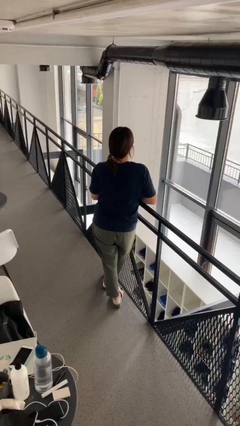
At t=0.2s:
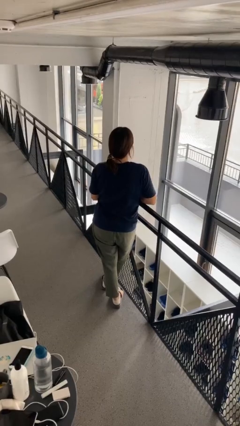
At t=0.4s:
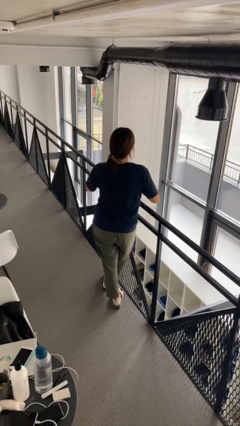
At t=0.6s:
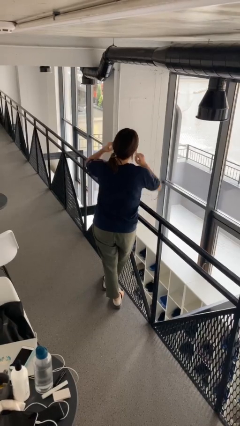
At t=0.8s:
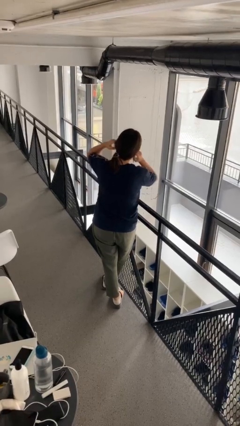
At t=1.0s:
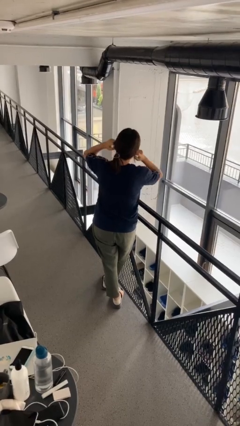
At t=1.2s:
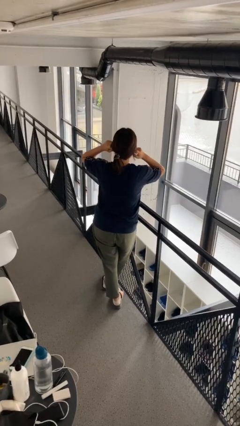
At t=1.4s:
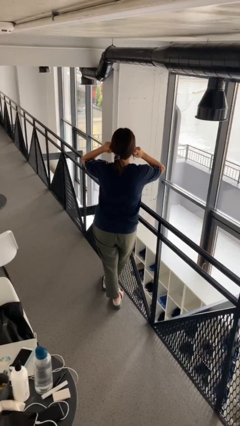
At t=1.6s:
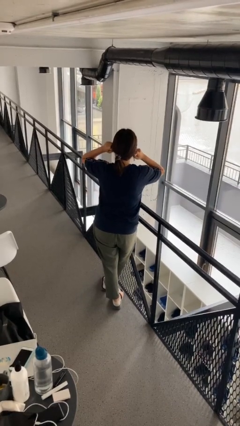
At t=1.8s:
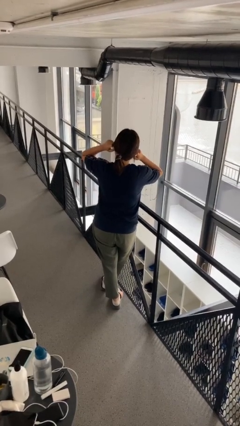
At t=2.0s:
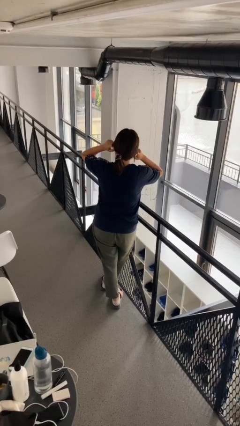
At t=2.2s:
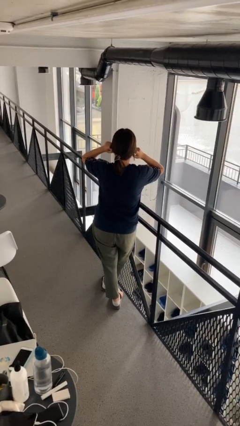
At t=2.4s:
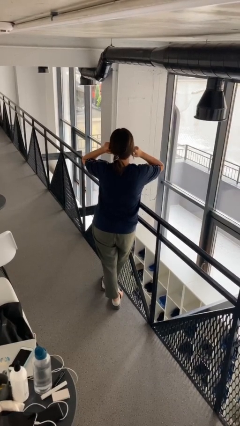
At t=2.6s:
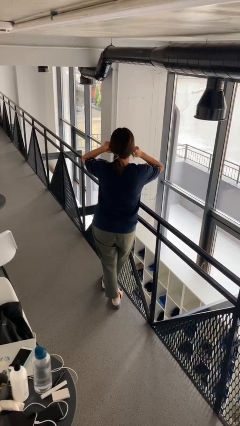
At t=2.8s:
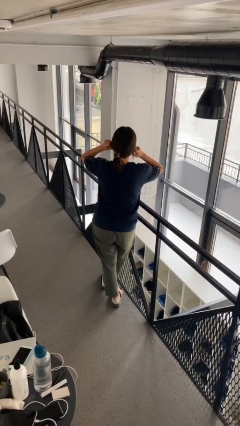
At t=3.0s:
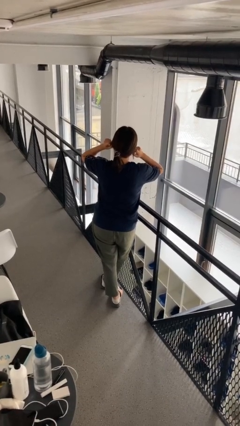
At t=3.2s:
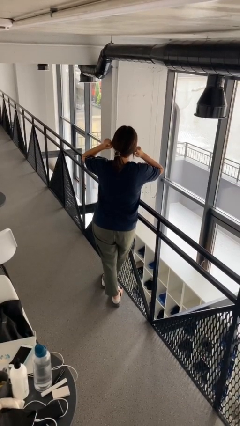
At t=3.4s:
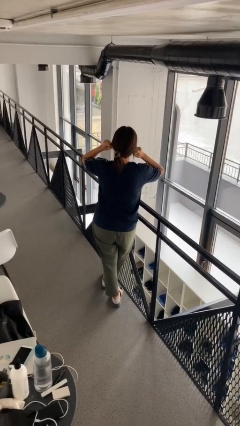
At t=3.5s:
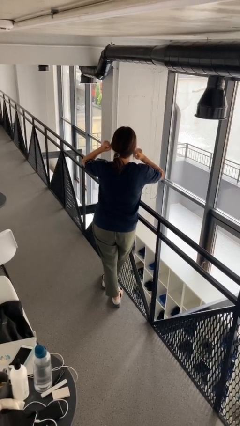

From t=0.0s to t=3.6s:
person puts fingers in ear

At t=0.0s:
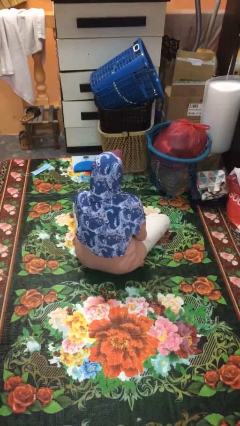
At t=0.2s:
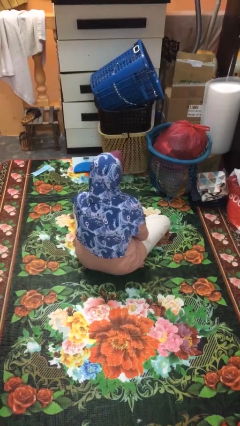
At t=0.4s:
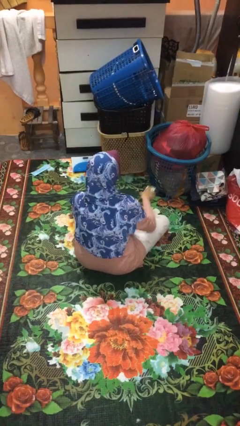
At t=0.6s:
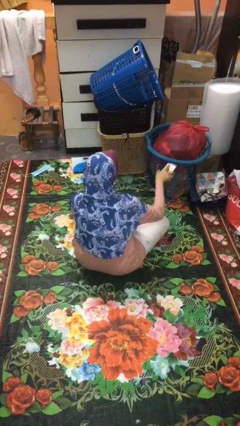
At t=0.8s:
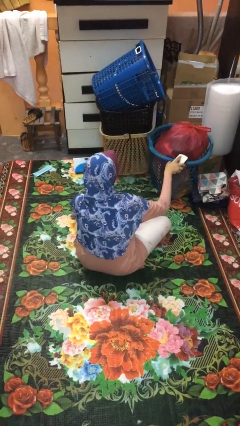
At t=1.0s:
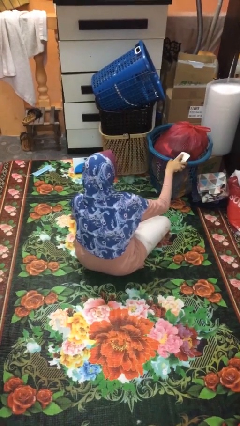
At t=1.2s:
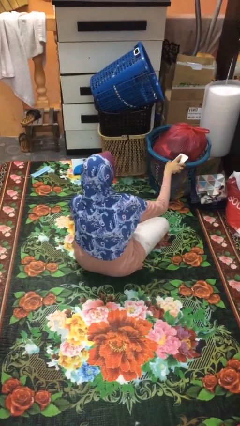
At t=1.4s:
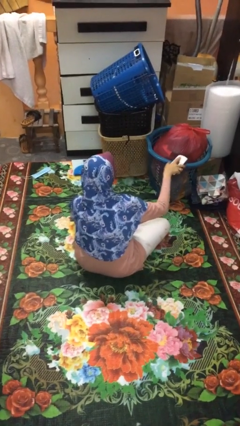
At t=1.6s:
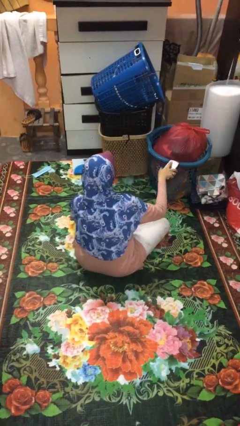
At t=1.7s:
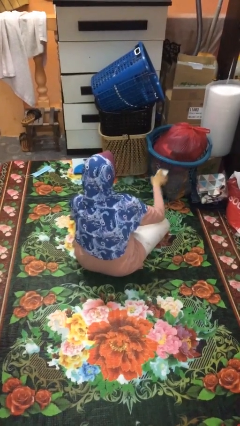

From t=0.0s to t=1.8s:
person uses television remote

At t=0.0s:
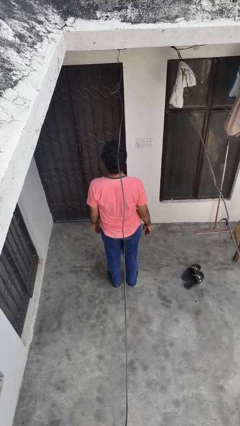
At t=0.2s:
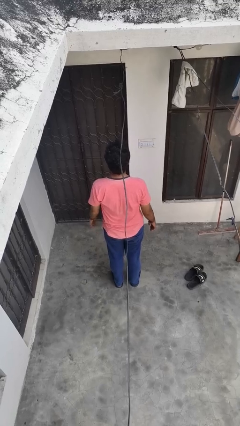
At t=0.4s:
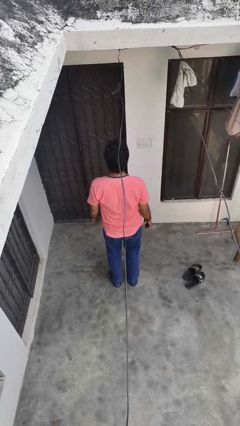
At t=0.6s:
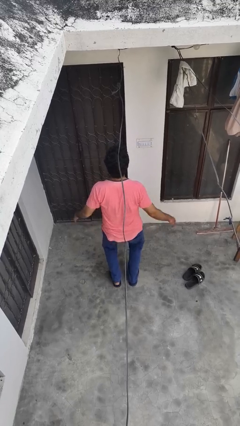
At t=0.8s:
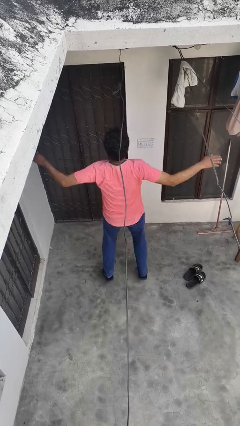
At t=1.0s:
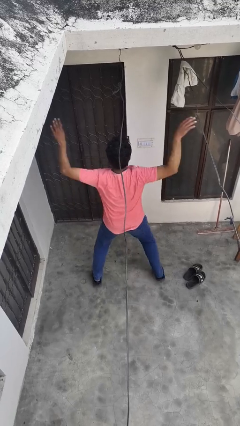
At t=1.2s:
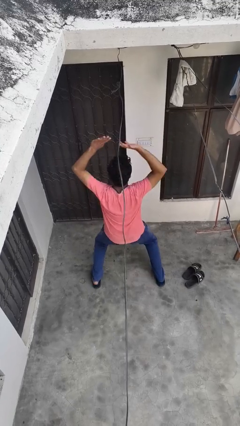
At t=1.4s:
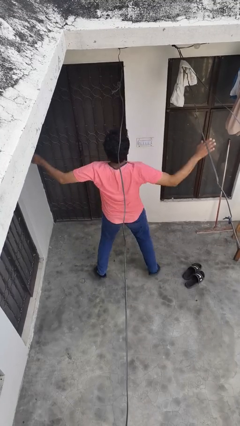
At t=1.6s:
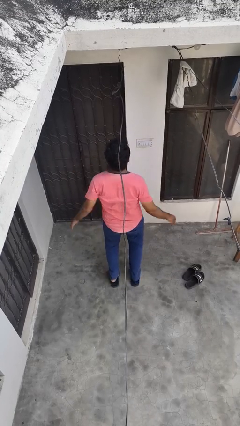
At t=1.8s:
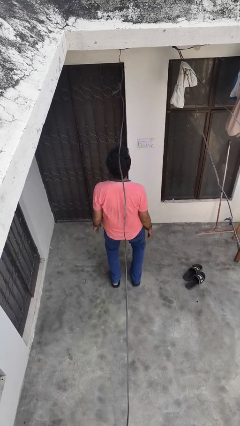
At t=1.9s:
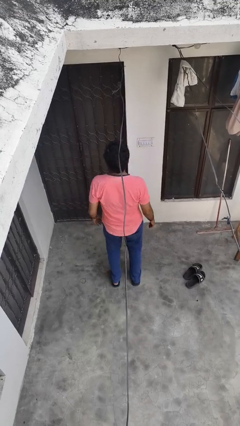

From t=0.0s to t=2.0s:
person exercises with jumping jacks

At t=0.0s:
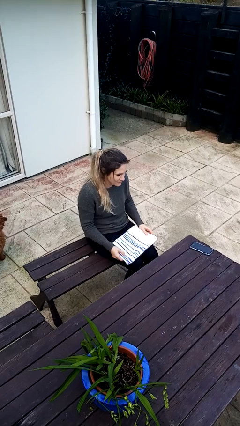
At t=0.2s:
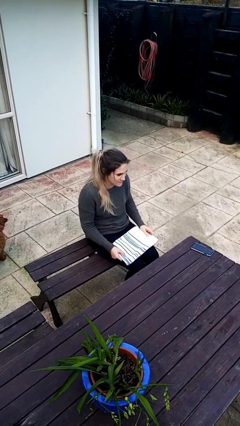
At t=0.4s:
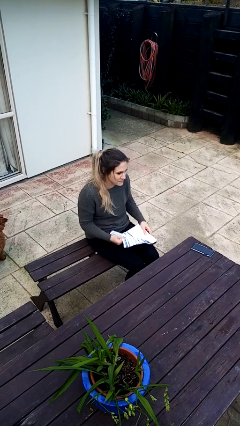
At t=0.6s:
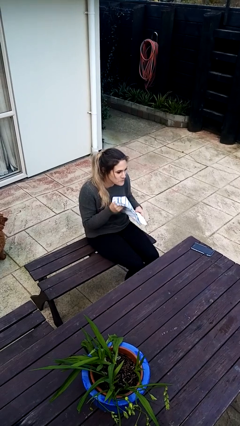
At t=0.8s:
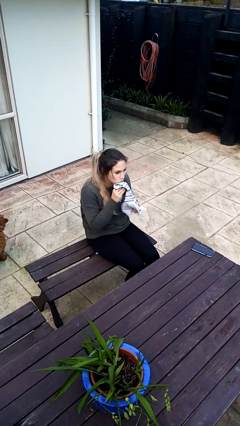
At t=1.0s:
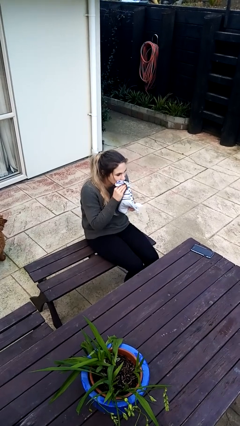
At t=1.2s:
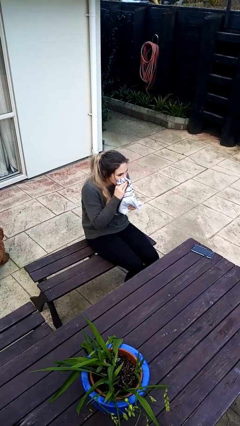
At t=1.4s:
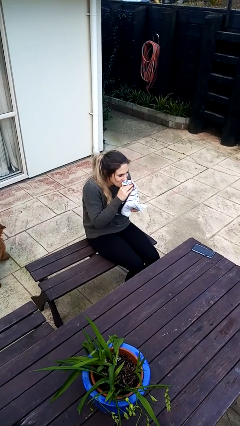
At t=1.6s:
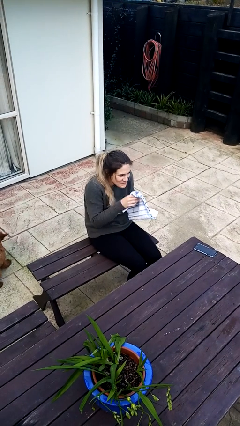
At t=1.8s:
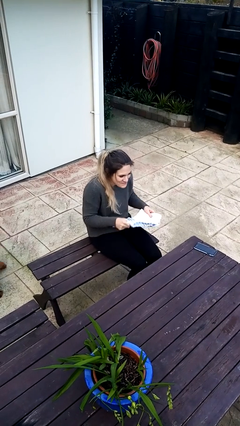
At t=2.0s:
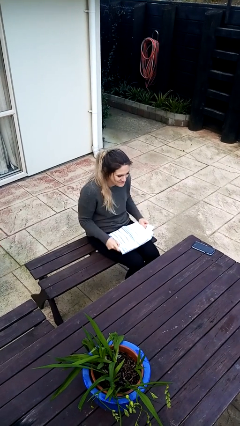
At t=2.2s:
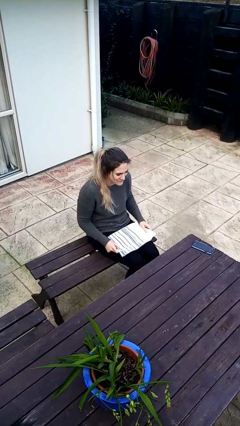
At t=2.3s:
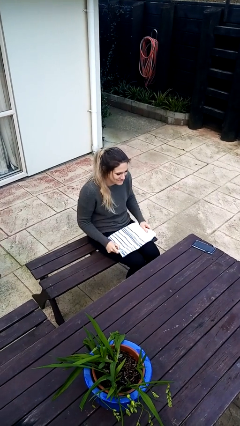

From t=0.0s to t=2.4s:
person wipes mouth with napkin

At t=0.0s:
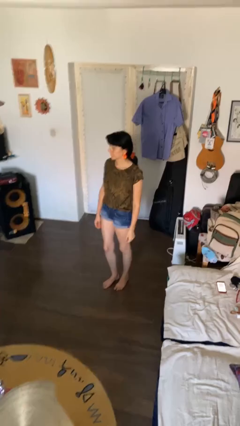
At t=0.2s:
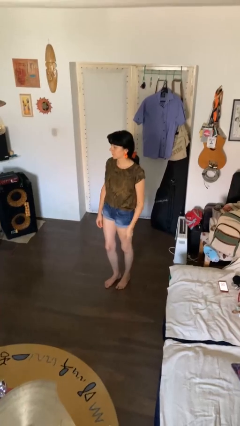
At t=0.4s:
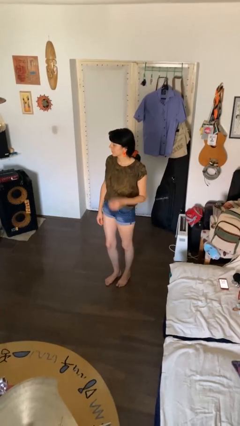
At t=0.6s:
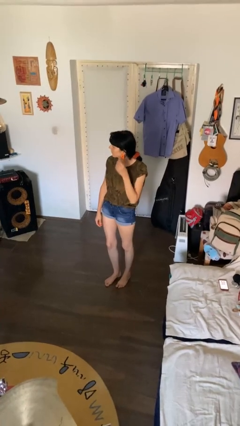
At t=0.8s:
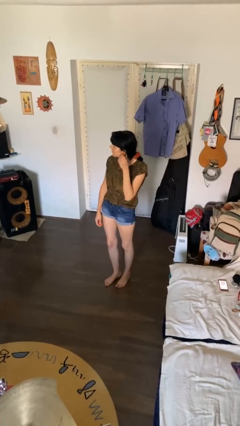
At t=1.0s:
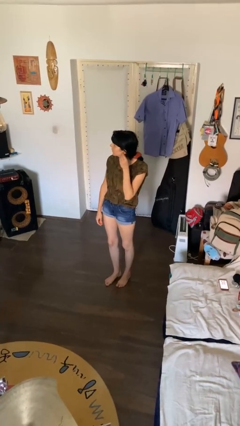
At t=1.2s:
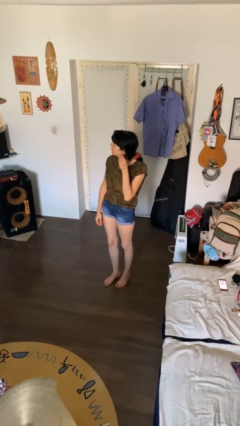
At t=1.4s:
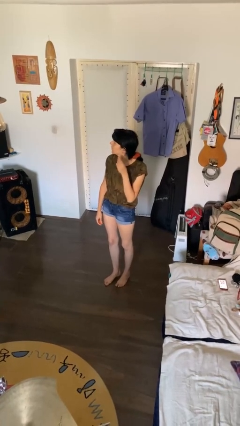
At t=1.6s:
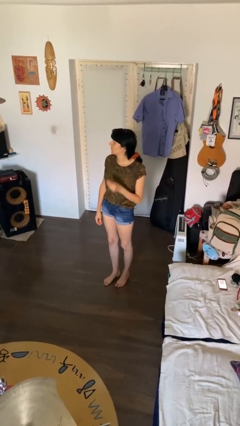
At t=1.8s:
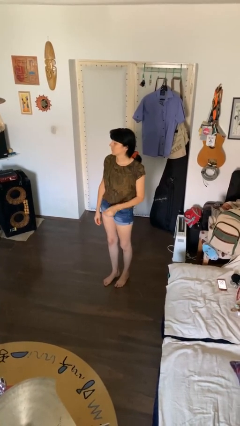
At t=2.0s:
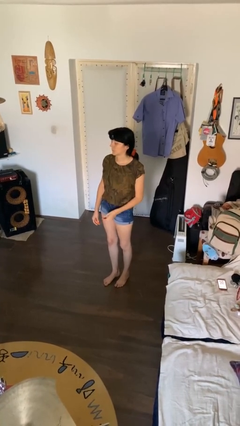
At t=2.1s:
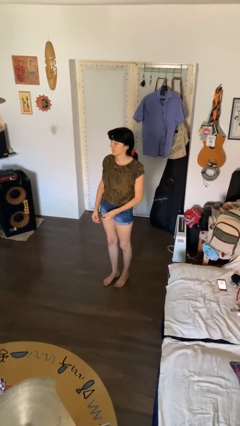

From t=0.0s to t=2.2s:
person takes off earrings

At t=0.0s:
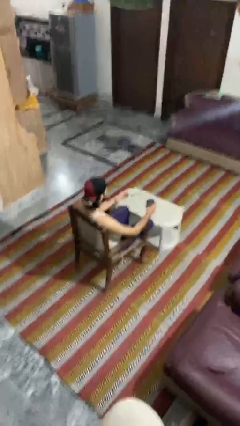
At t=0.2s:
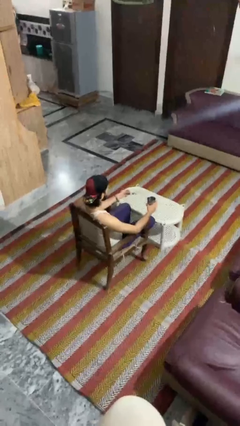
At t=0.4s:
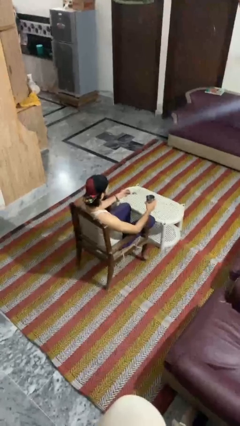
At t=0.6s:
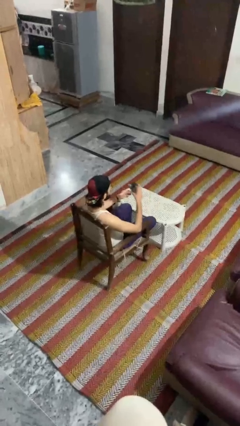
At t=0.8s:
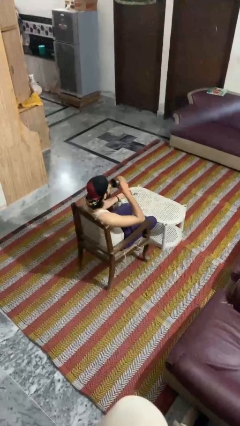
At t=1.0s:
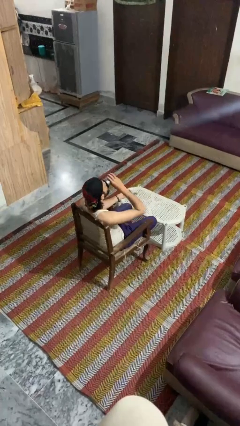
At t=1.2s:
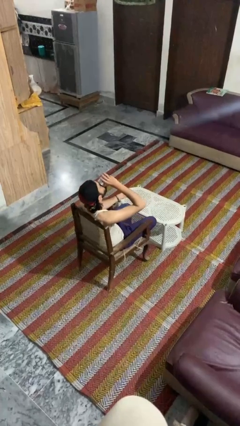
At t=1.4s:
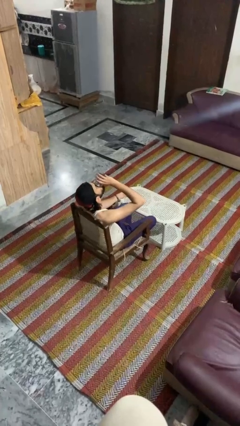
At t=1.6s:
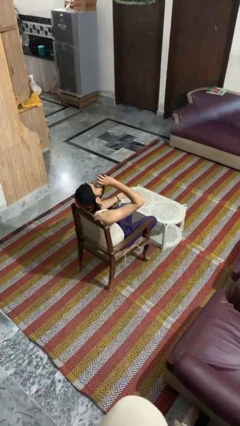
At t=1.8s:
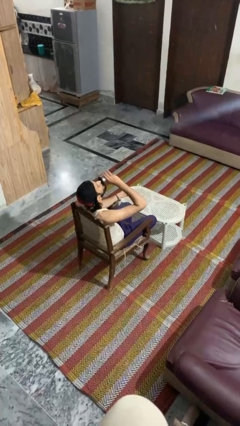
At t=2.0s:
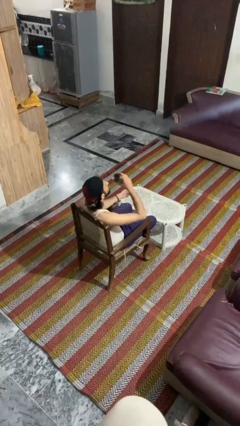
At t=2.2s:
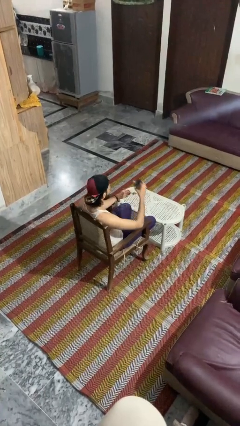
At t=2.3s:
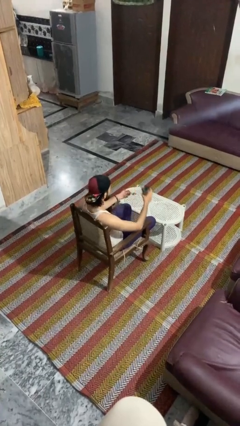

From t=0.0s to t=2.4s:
person drinks from mug

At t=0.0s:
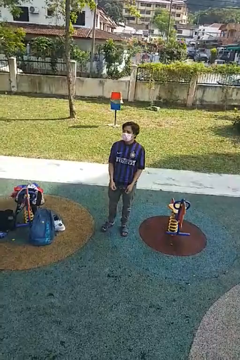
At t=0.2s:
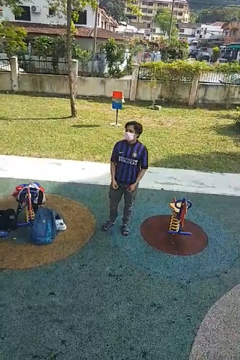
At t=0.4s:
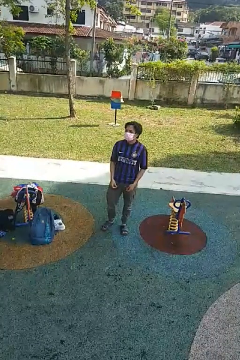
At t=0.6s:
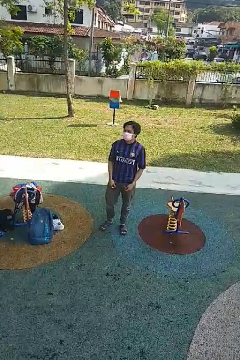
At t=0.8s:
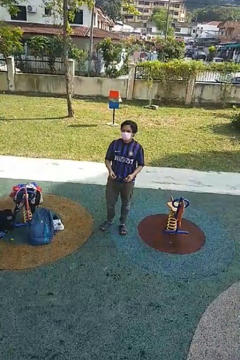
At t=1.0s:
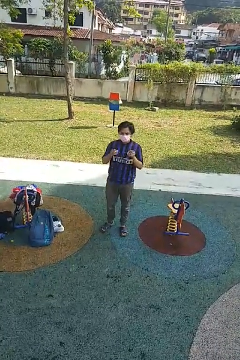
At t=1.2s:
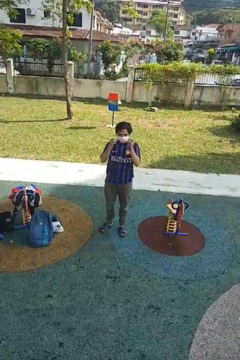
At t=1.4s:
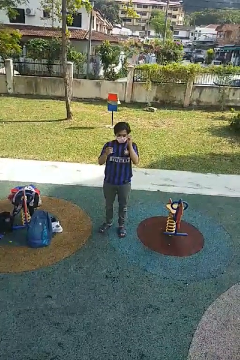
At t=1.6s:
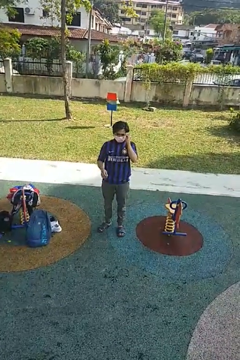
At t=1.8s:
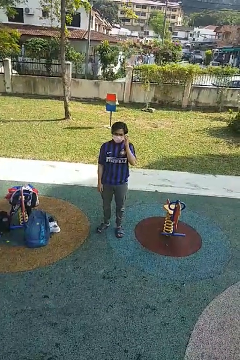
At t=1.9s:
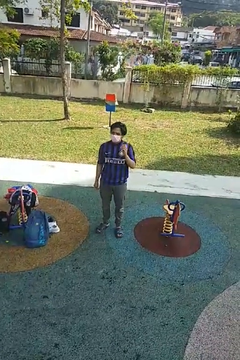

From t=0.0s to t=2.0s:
person puts on glasses

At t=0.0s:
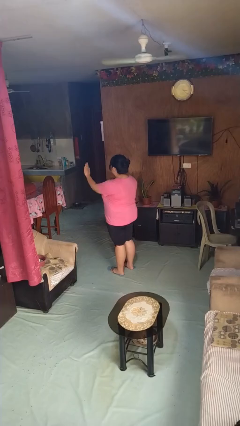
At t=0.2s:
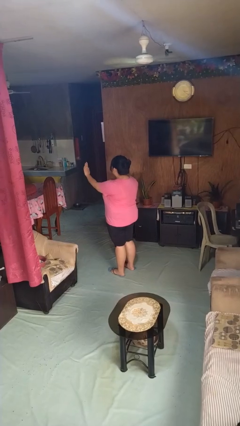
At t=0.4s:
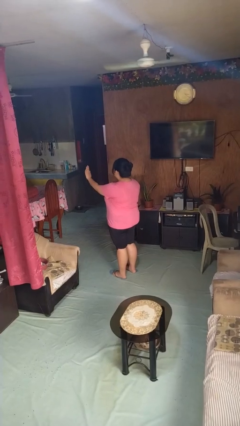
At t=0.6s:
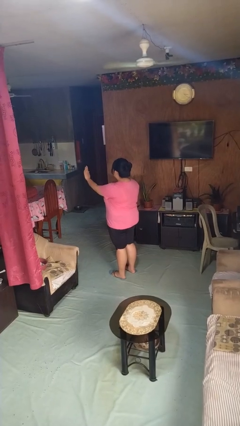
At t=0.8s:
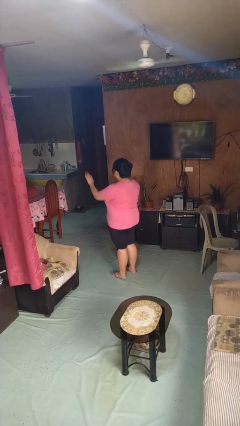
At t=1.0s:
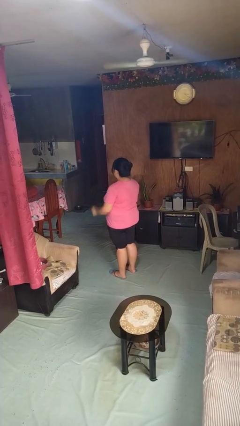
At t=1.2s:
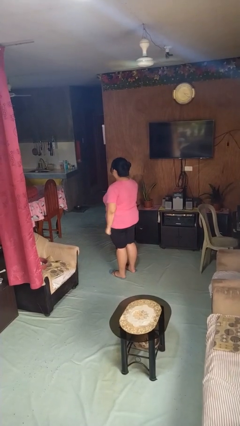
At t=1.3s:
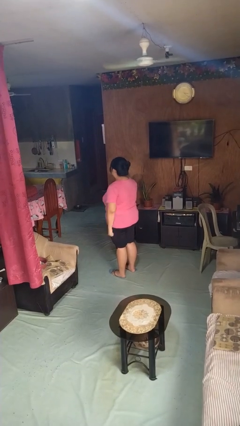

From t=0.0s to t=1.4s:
person gestures stop
